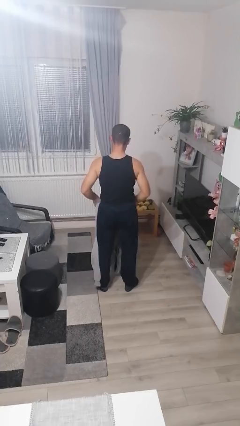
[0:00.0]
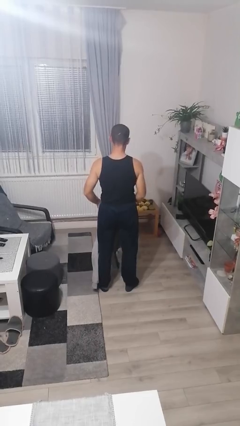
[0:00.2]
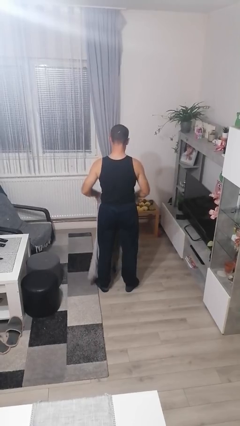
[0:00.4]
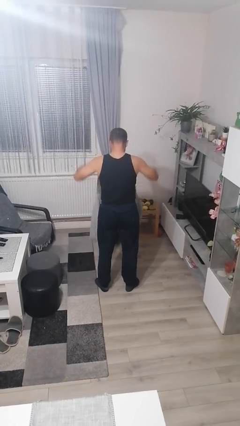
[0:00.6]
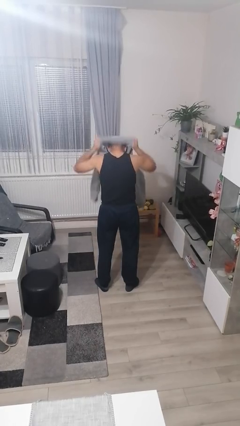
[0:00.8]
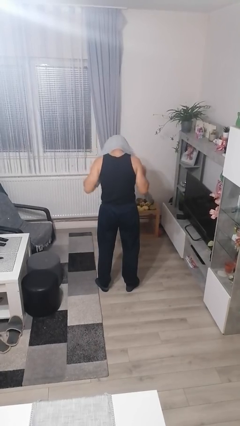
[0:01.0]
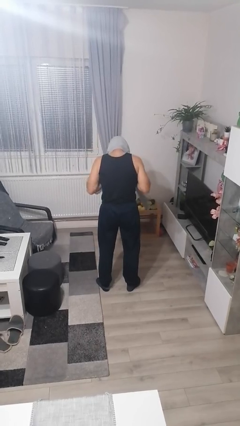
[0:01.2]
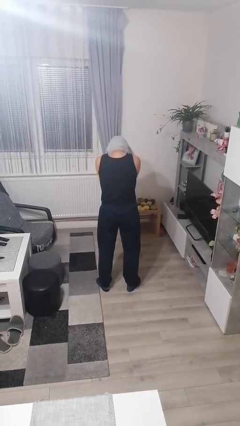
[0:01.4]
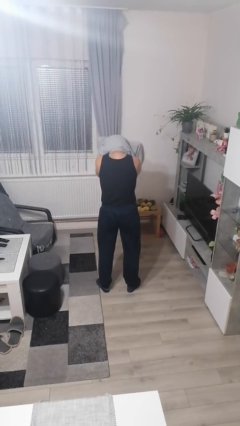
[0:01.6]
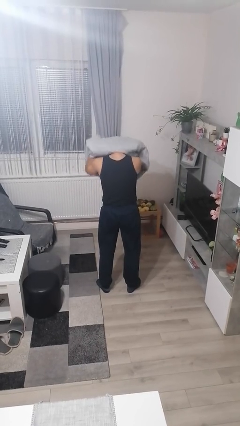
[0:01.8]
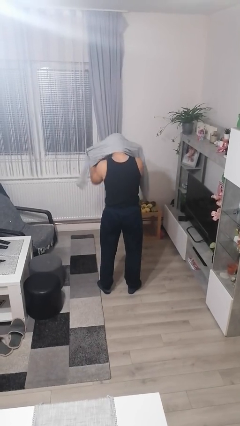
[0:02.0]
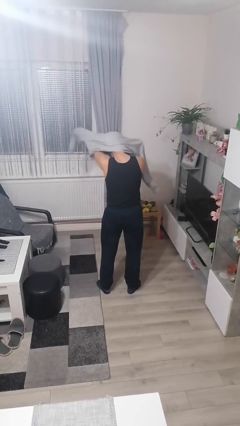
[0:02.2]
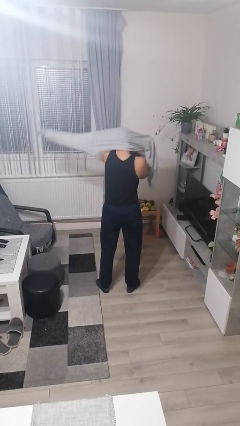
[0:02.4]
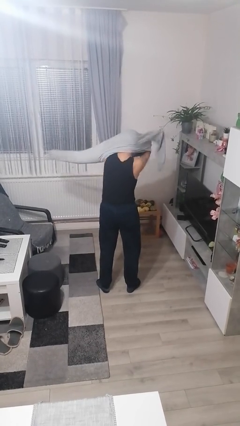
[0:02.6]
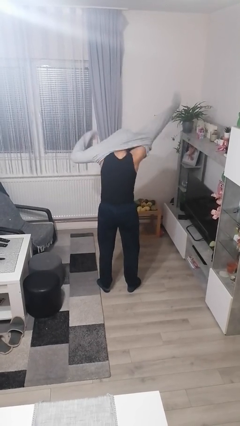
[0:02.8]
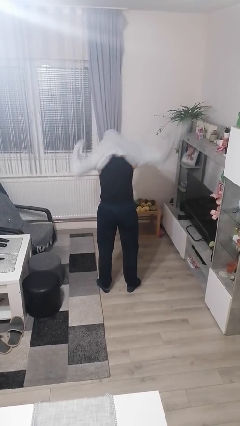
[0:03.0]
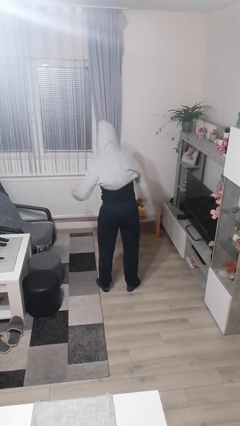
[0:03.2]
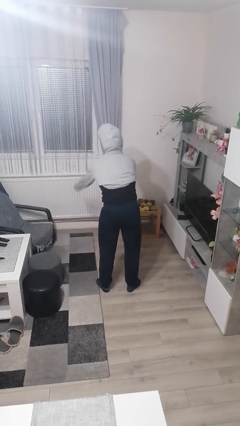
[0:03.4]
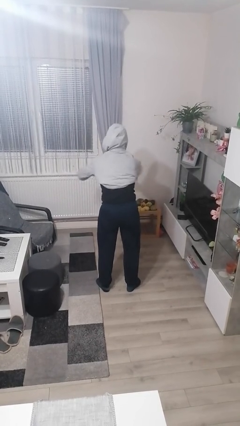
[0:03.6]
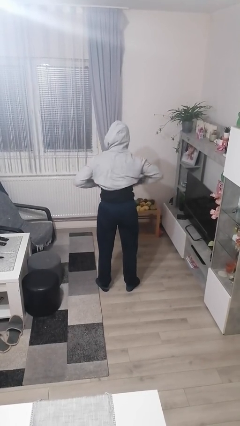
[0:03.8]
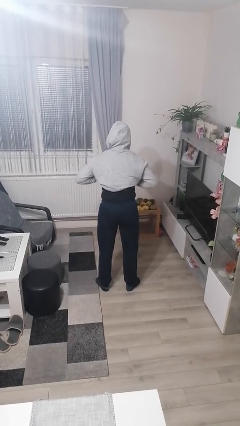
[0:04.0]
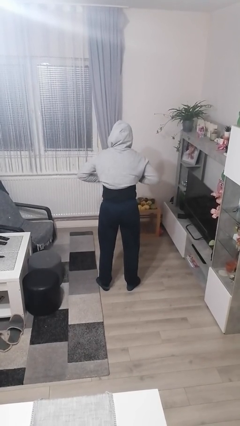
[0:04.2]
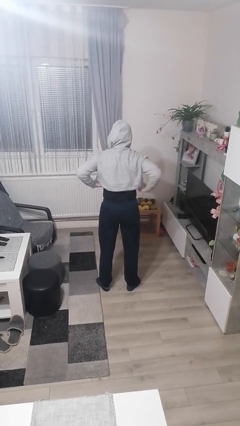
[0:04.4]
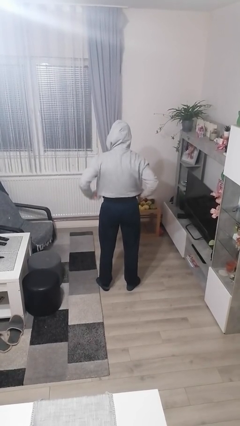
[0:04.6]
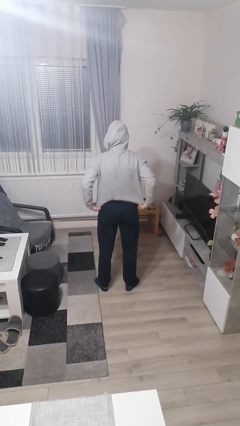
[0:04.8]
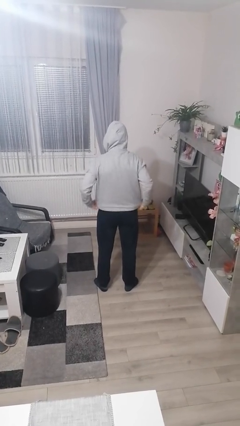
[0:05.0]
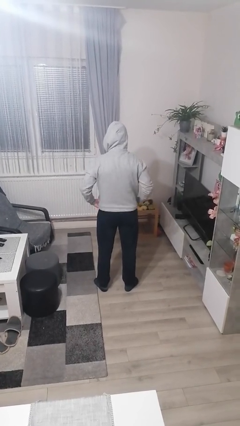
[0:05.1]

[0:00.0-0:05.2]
person puts on hoodie

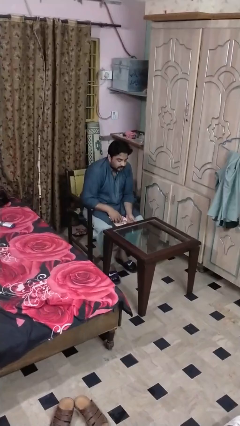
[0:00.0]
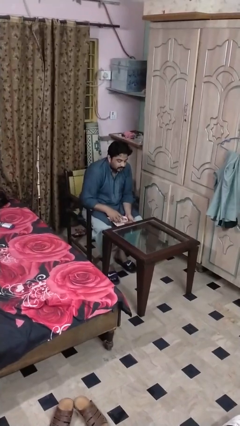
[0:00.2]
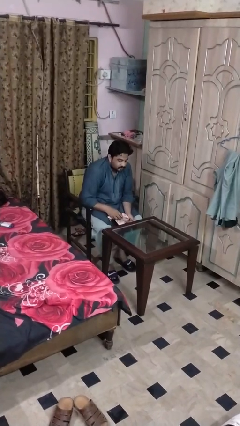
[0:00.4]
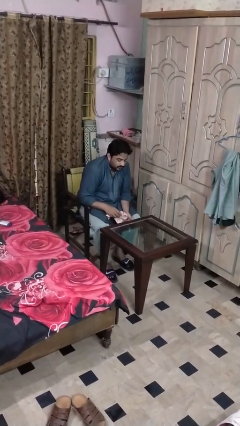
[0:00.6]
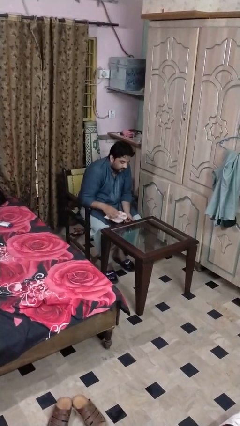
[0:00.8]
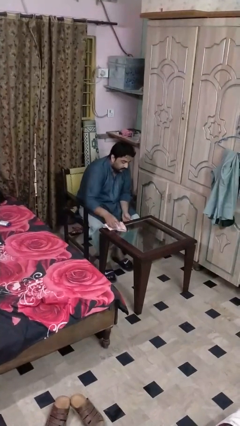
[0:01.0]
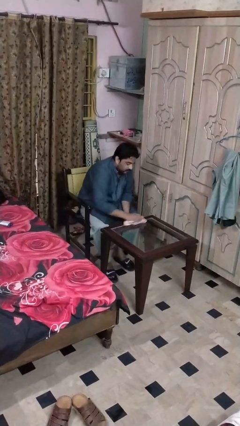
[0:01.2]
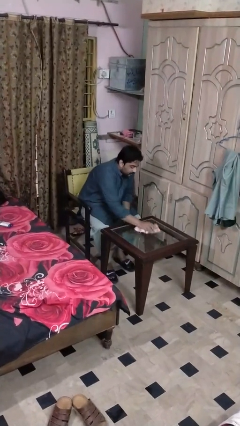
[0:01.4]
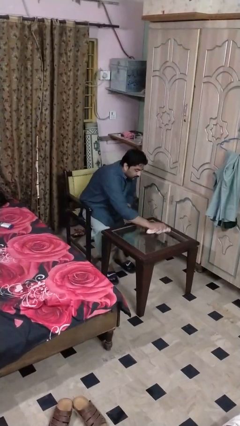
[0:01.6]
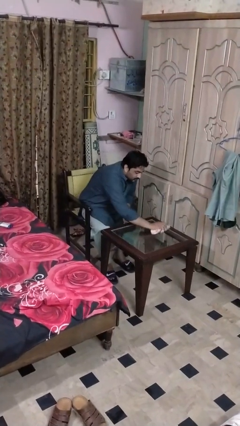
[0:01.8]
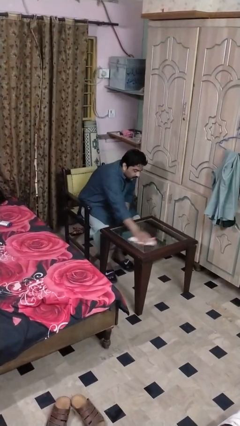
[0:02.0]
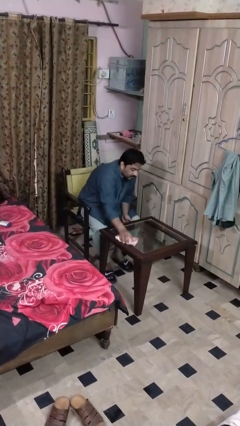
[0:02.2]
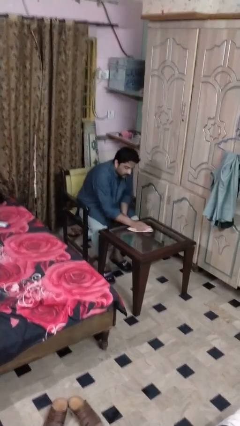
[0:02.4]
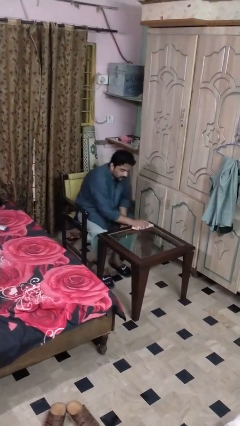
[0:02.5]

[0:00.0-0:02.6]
person cleans table with rag

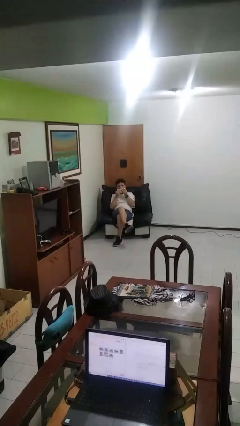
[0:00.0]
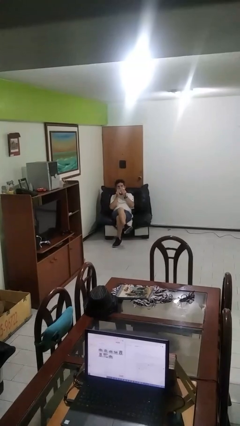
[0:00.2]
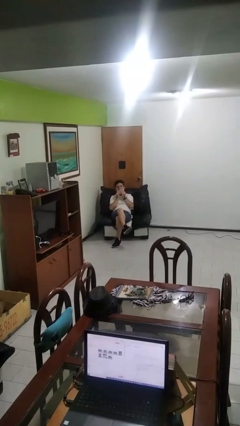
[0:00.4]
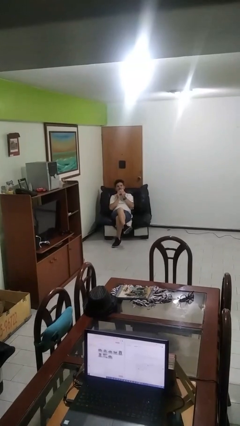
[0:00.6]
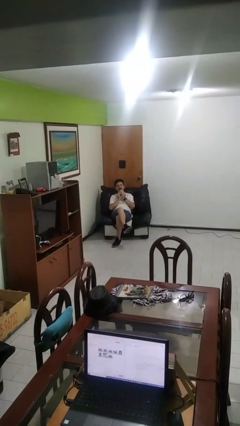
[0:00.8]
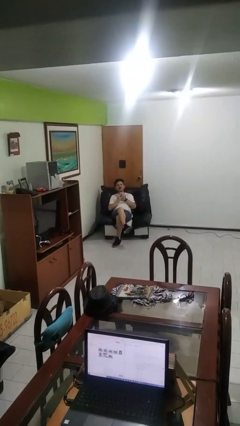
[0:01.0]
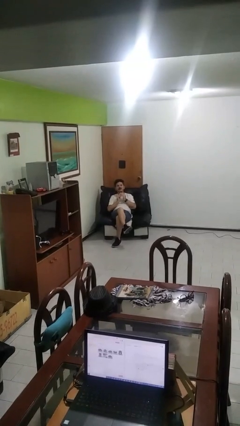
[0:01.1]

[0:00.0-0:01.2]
person wipes mouth with napkin

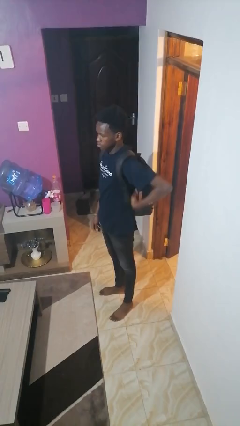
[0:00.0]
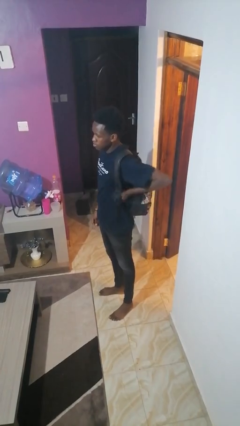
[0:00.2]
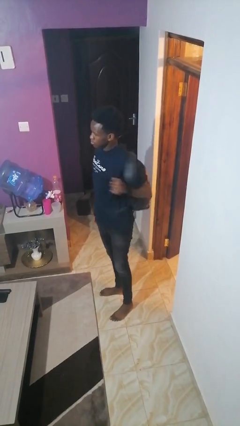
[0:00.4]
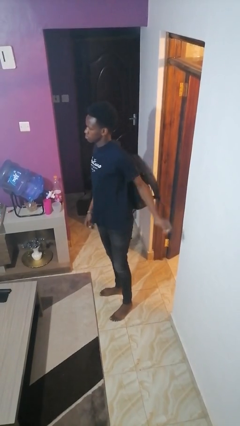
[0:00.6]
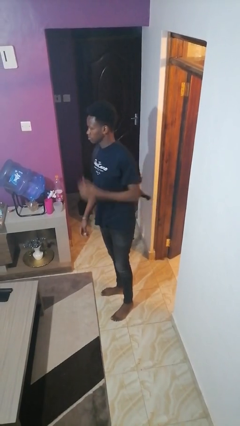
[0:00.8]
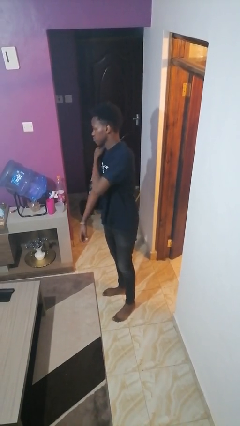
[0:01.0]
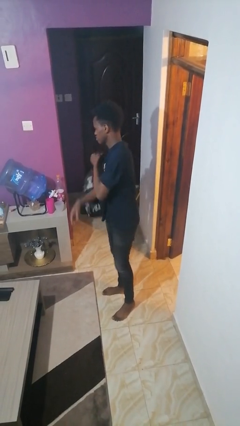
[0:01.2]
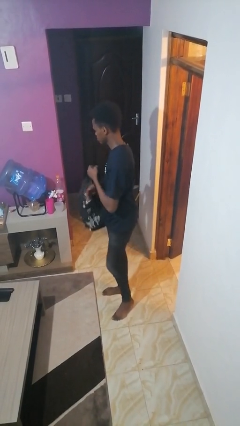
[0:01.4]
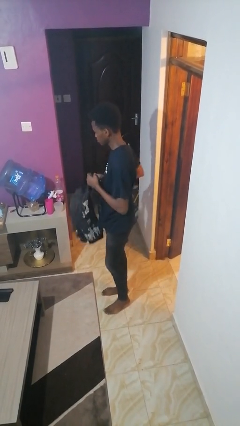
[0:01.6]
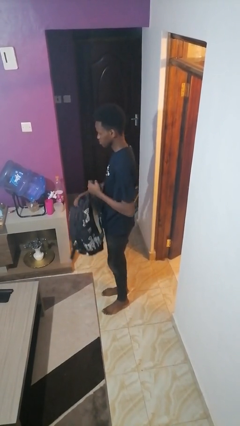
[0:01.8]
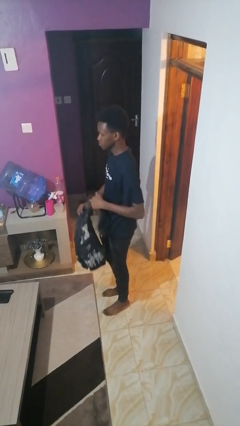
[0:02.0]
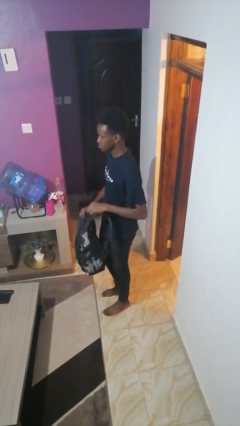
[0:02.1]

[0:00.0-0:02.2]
person takes off backpack

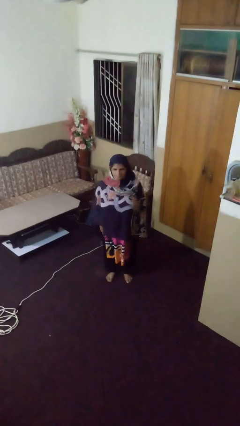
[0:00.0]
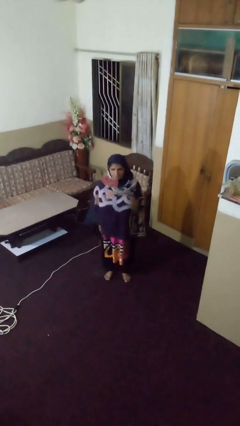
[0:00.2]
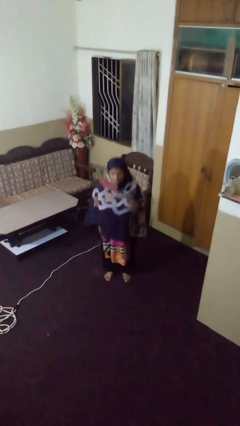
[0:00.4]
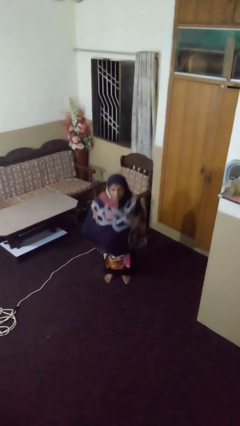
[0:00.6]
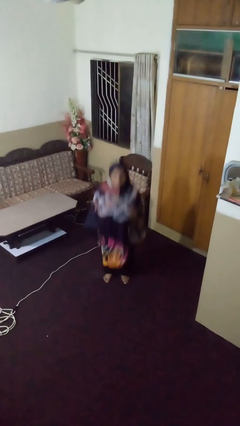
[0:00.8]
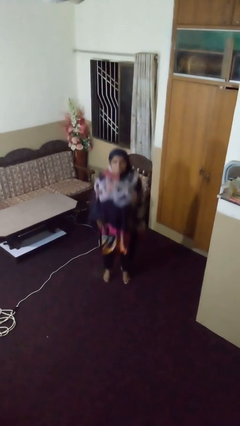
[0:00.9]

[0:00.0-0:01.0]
person jumps

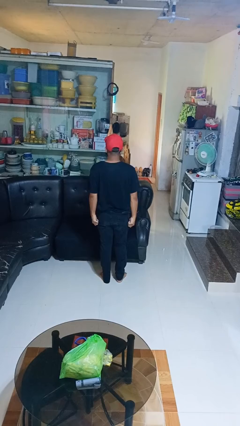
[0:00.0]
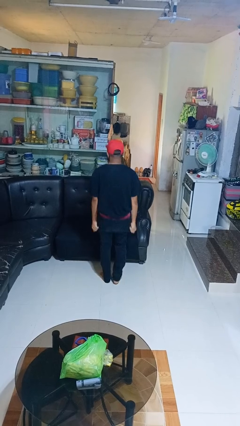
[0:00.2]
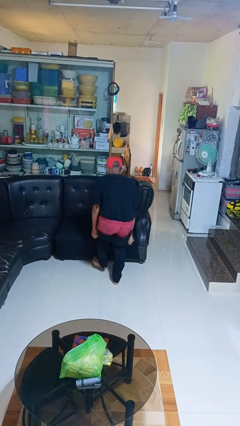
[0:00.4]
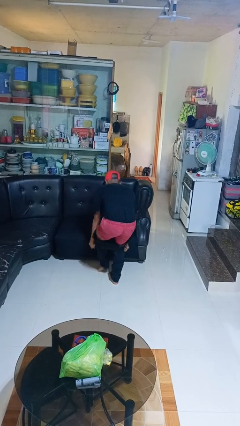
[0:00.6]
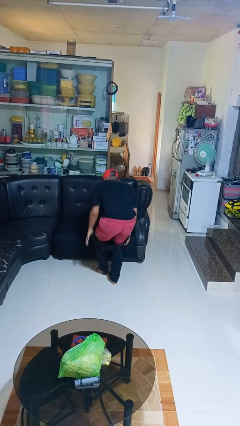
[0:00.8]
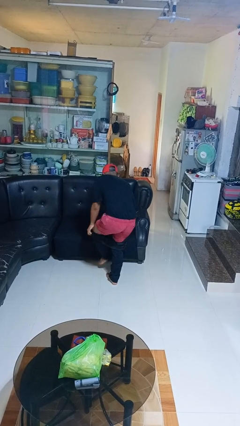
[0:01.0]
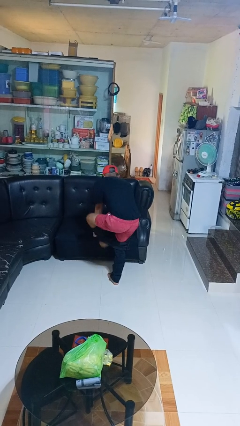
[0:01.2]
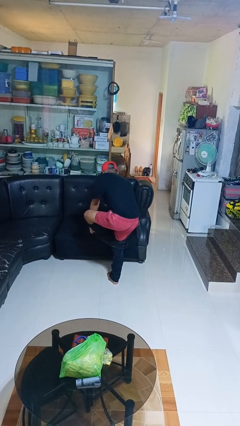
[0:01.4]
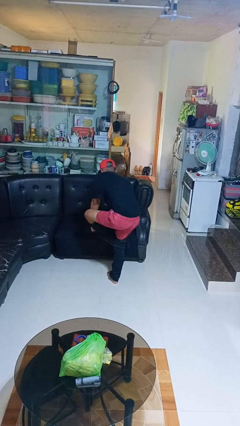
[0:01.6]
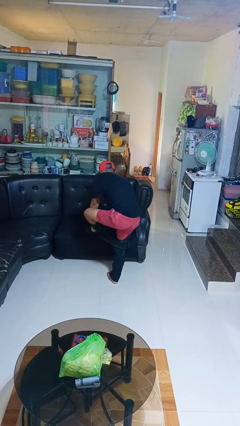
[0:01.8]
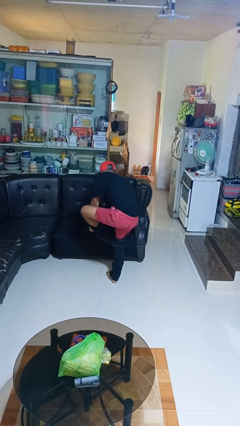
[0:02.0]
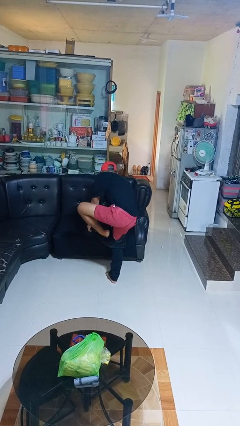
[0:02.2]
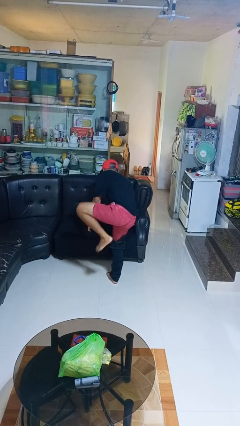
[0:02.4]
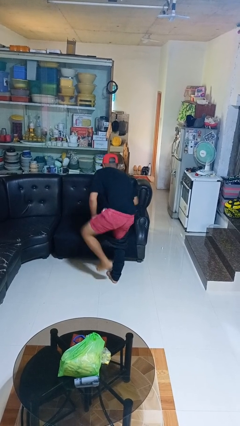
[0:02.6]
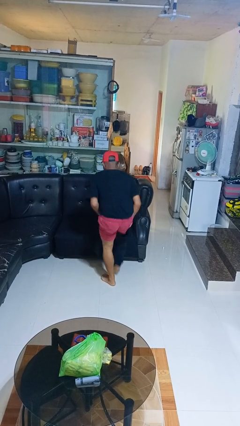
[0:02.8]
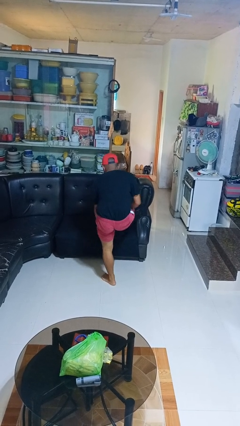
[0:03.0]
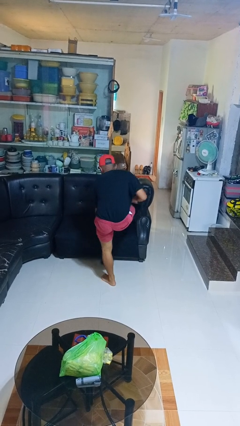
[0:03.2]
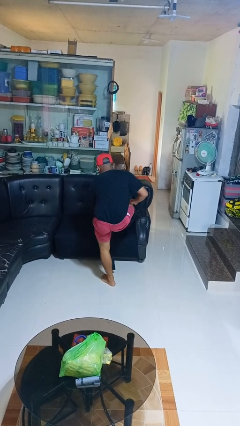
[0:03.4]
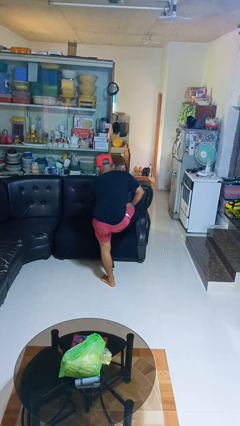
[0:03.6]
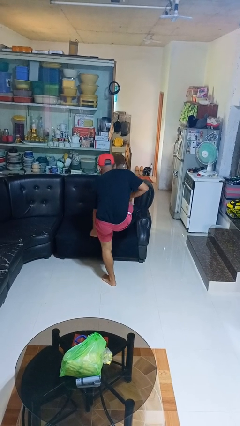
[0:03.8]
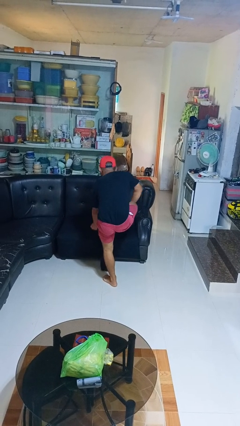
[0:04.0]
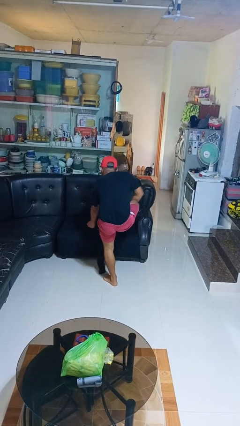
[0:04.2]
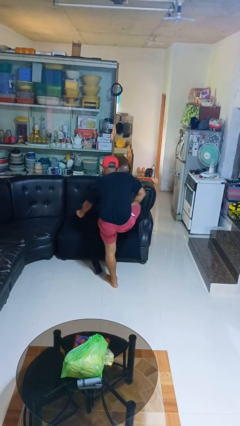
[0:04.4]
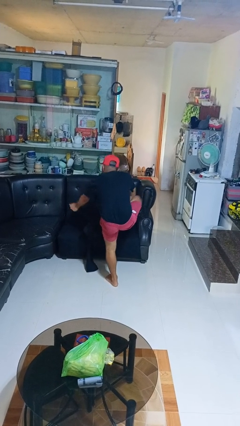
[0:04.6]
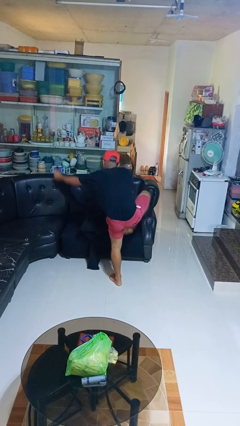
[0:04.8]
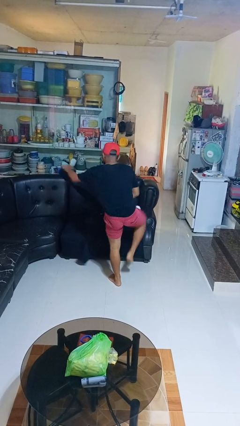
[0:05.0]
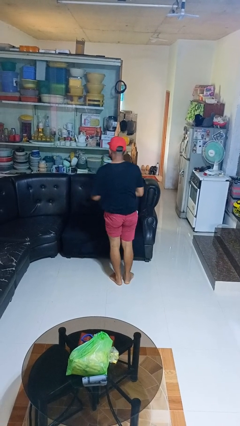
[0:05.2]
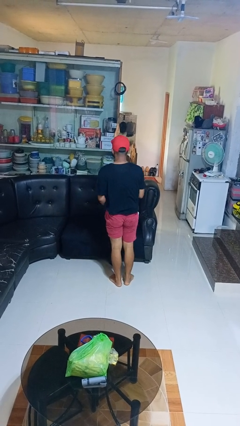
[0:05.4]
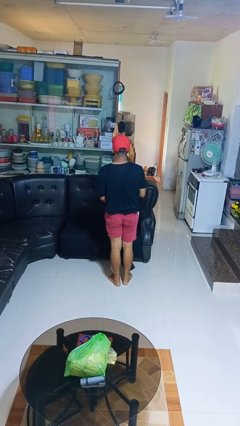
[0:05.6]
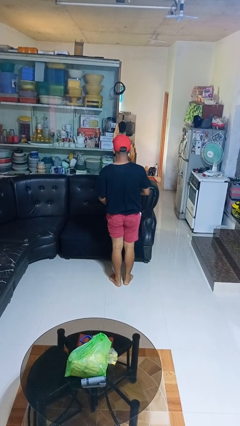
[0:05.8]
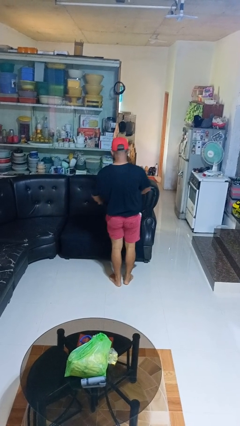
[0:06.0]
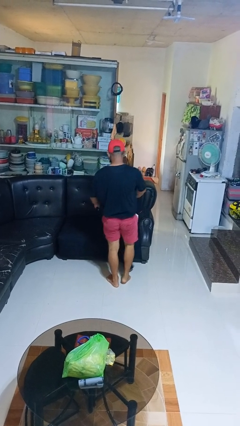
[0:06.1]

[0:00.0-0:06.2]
person takes off pants
